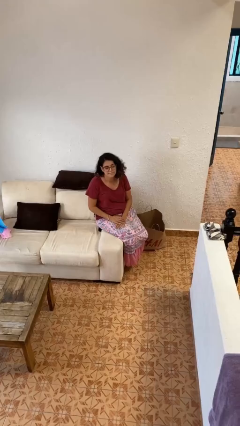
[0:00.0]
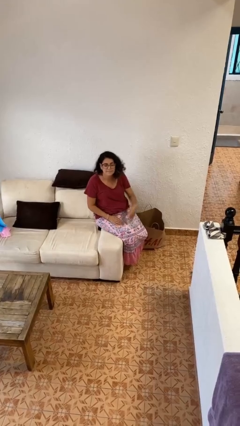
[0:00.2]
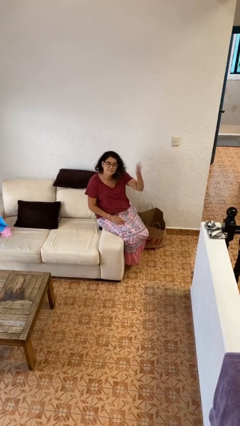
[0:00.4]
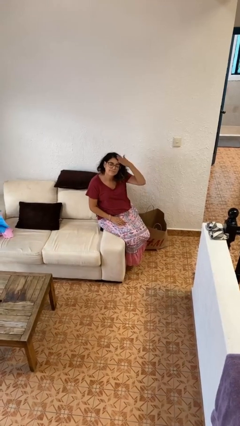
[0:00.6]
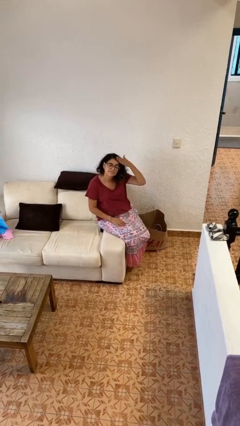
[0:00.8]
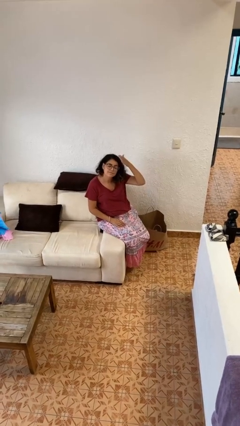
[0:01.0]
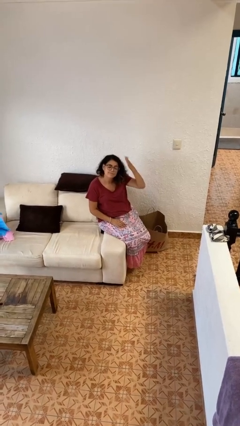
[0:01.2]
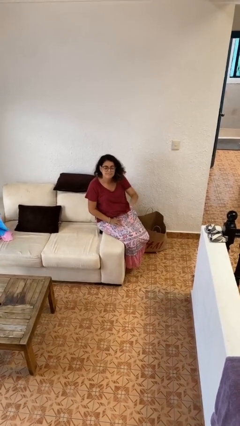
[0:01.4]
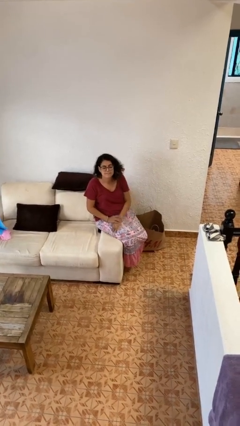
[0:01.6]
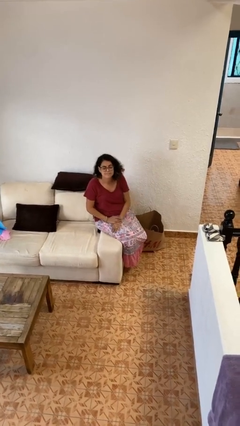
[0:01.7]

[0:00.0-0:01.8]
person pats head

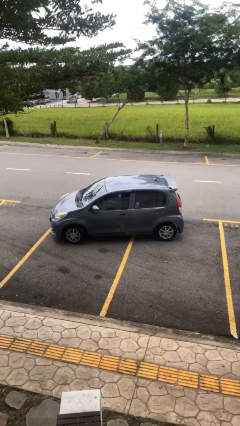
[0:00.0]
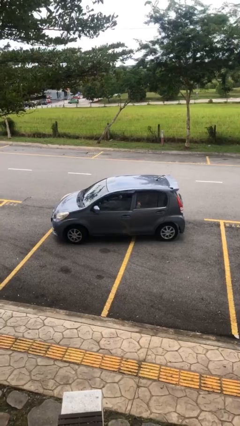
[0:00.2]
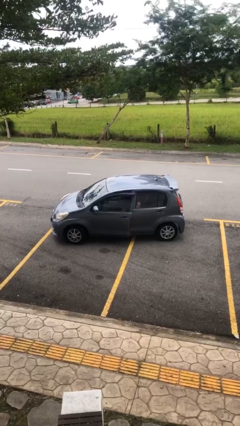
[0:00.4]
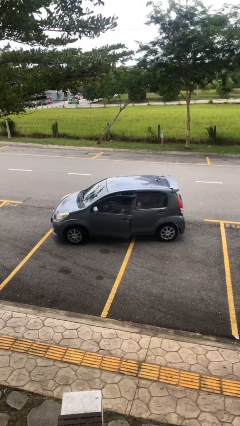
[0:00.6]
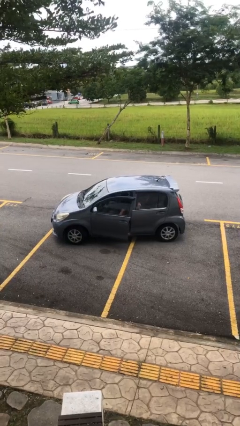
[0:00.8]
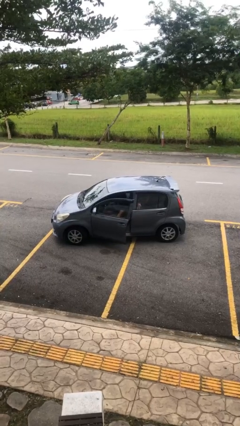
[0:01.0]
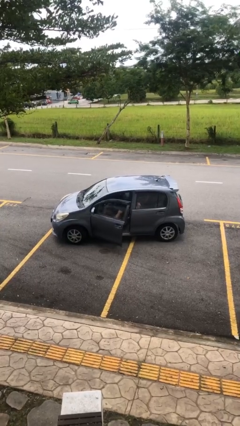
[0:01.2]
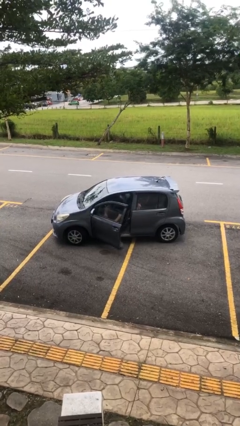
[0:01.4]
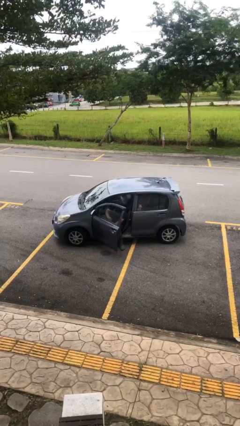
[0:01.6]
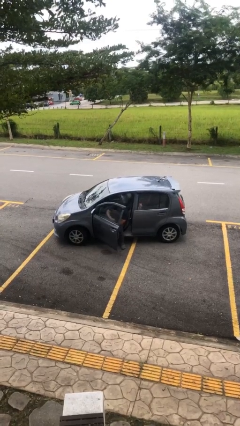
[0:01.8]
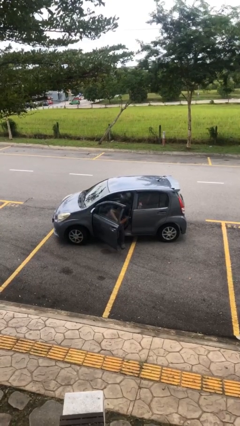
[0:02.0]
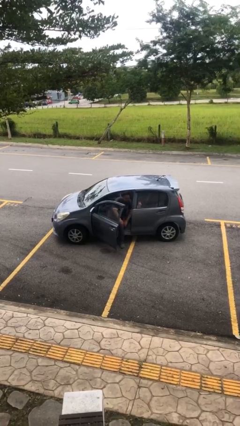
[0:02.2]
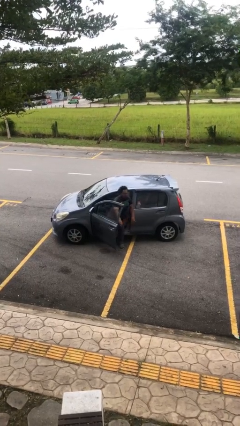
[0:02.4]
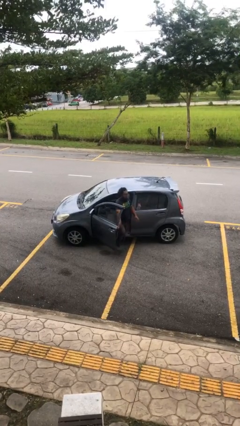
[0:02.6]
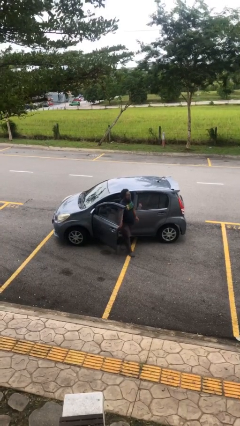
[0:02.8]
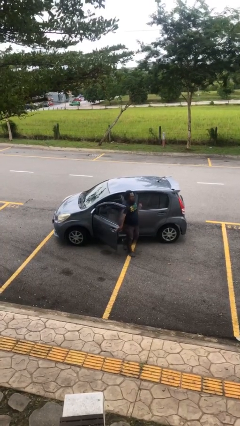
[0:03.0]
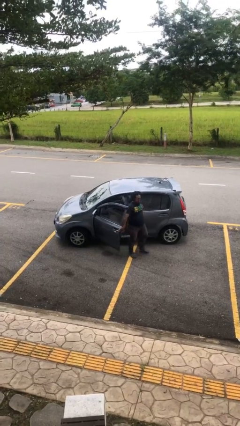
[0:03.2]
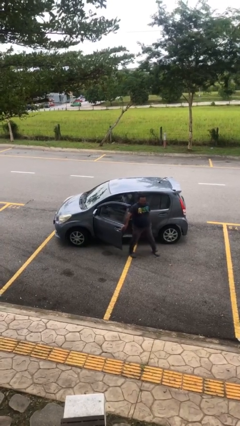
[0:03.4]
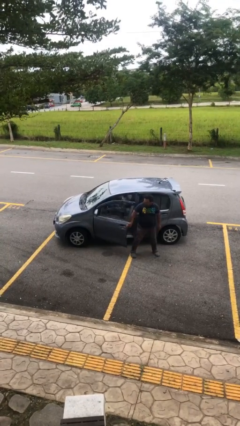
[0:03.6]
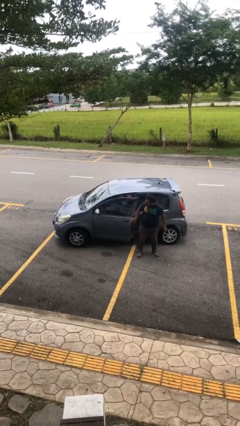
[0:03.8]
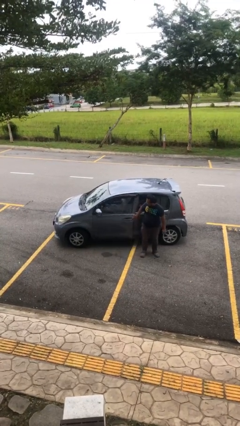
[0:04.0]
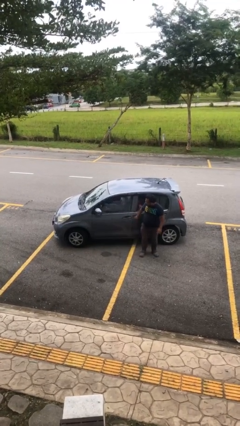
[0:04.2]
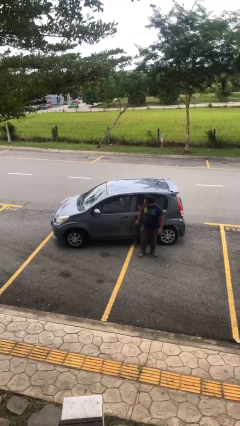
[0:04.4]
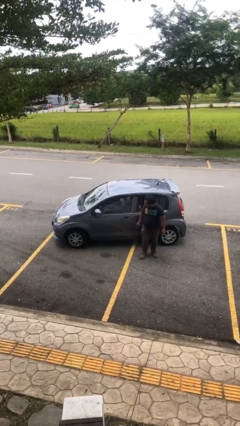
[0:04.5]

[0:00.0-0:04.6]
car drops off person

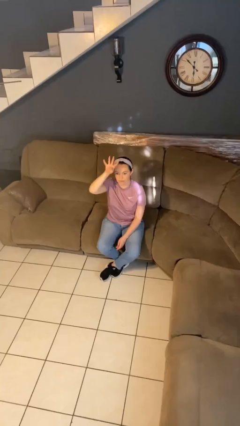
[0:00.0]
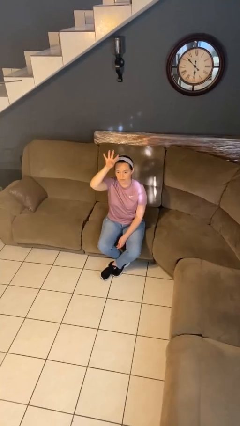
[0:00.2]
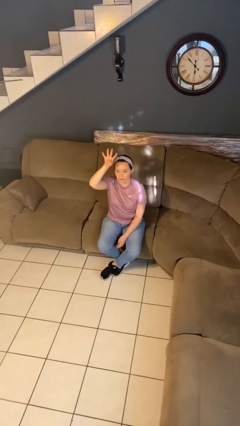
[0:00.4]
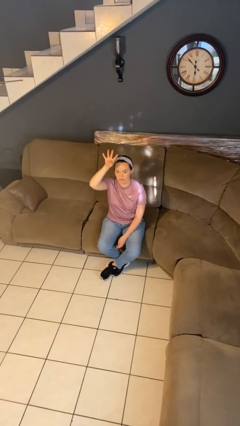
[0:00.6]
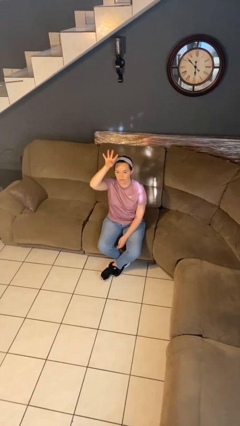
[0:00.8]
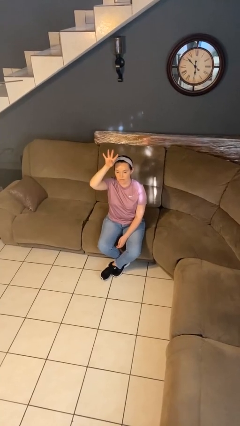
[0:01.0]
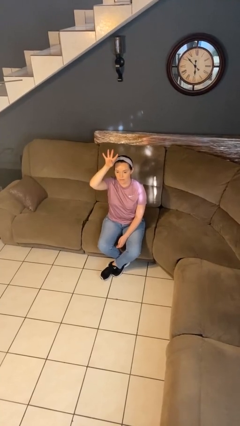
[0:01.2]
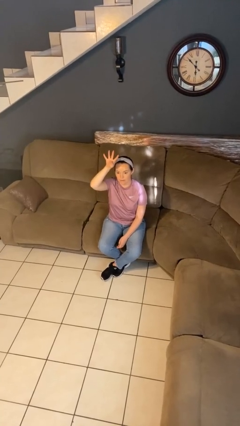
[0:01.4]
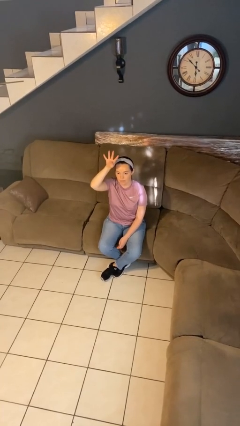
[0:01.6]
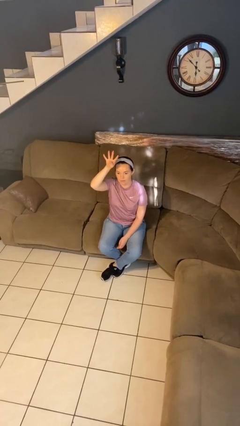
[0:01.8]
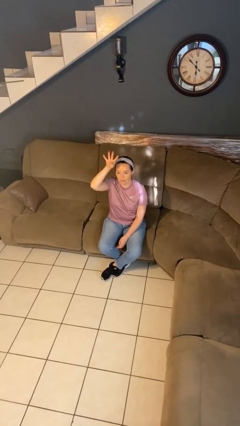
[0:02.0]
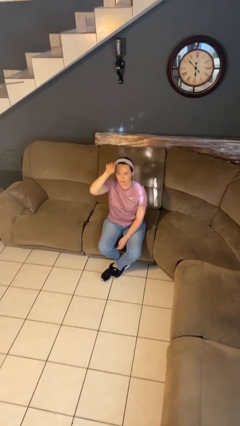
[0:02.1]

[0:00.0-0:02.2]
person gestures number four

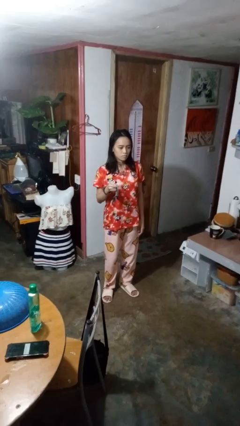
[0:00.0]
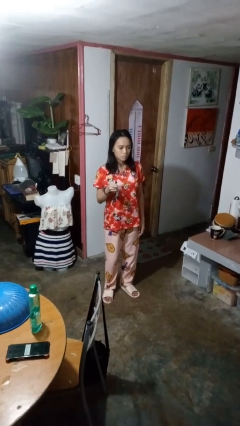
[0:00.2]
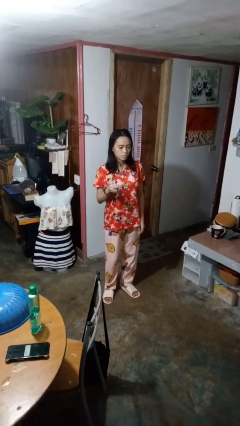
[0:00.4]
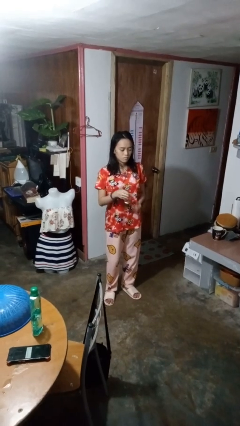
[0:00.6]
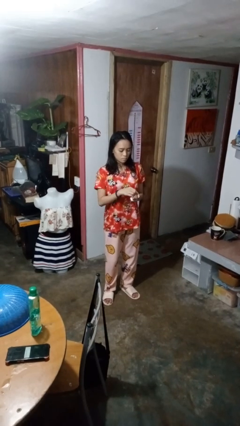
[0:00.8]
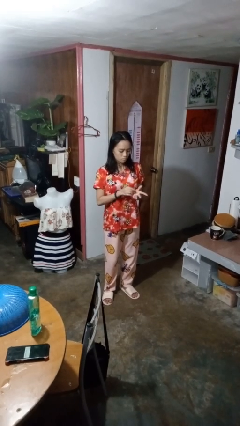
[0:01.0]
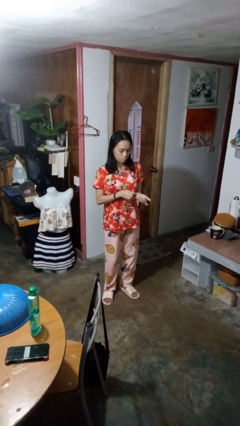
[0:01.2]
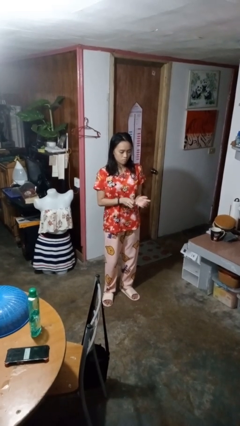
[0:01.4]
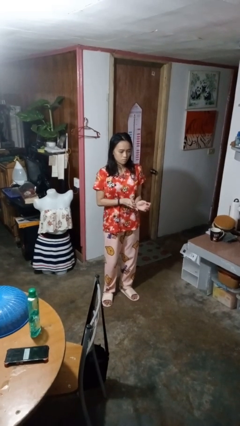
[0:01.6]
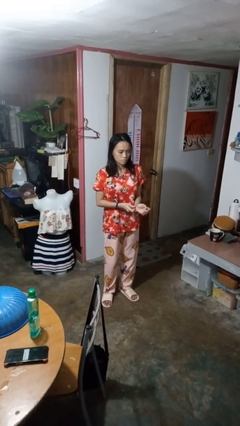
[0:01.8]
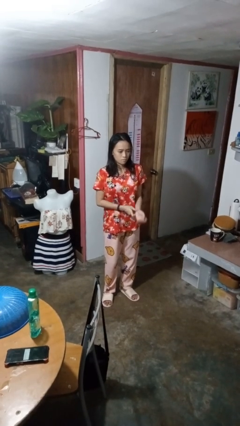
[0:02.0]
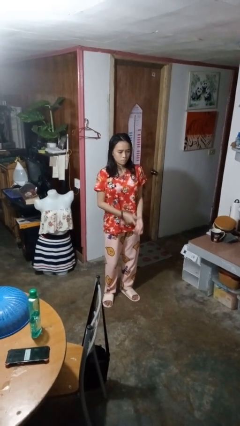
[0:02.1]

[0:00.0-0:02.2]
person puts on wristwatch

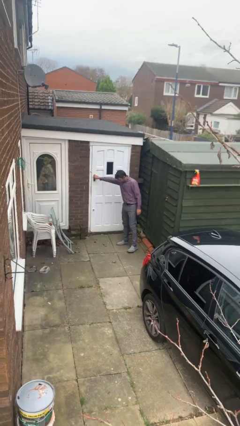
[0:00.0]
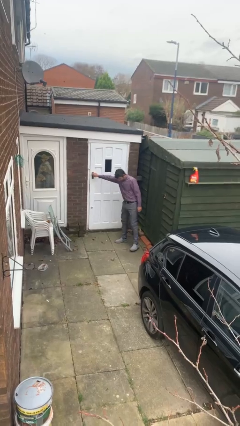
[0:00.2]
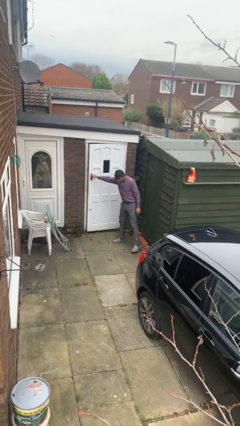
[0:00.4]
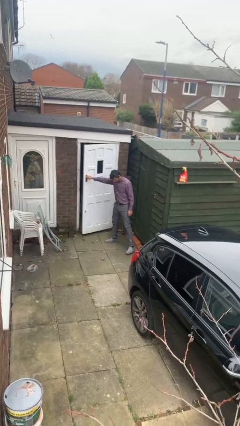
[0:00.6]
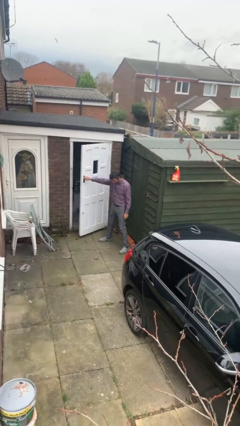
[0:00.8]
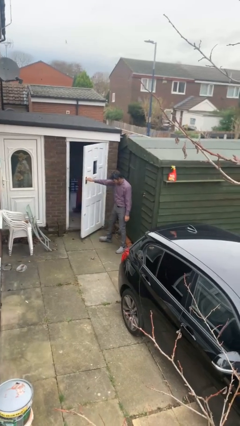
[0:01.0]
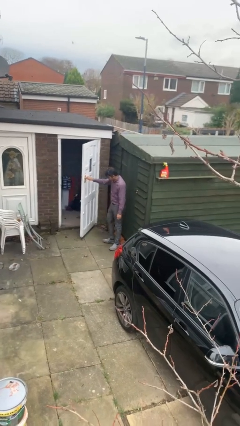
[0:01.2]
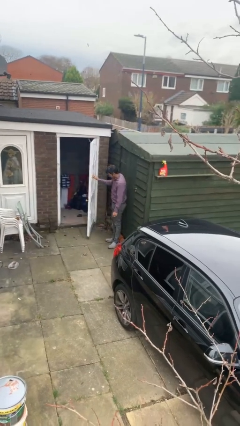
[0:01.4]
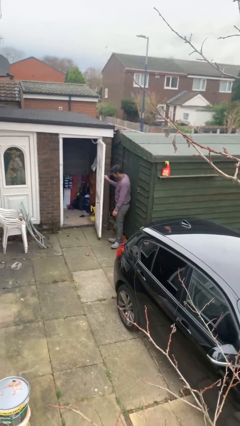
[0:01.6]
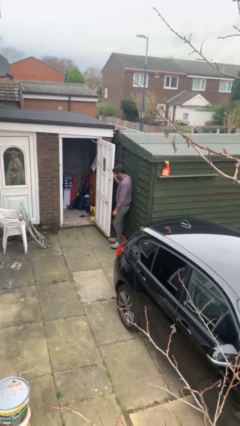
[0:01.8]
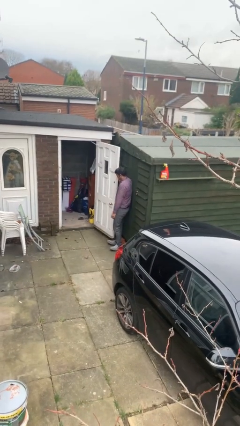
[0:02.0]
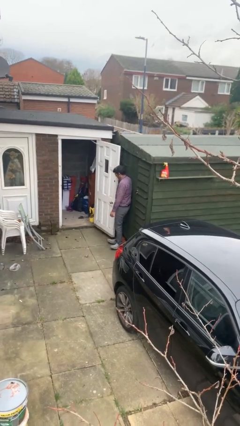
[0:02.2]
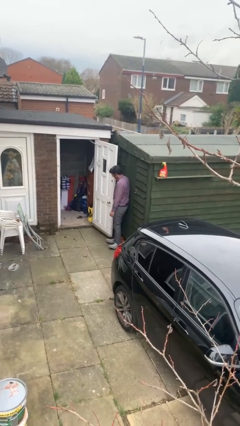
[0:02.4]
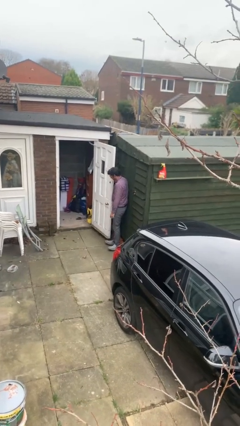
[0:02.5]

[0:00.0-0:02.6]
person opens facility door

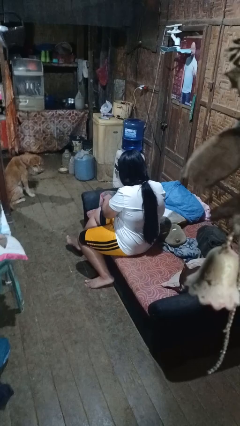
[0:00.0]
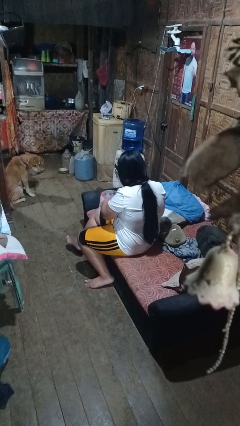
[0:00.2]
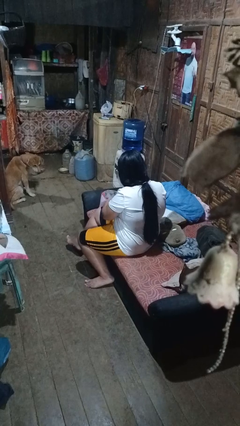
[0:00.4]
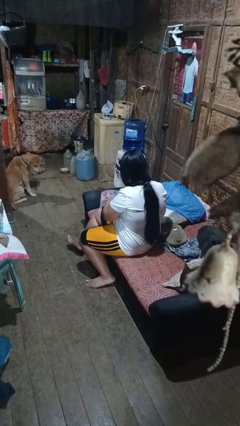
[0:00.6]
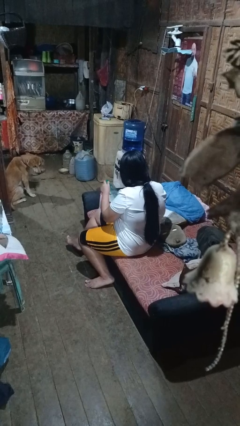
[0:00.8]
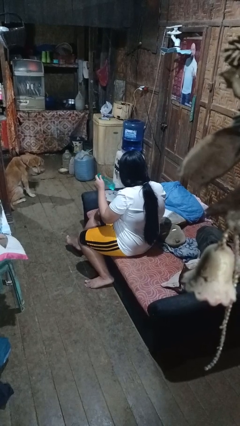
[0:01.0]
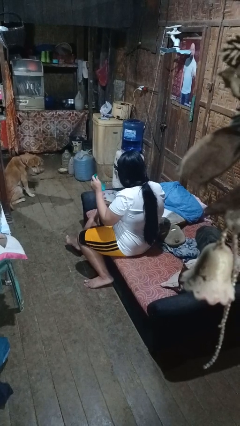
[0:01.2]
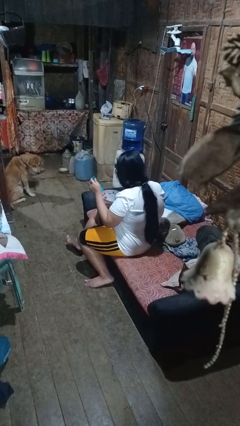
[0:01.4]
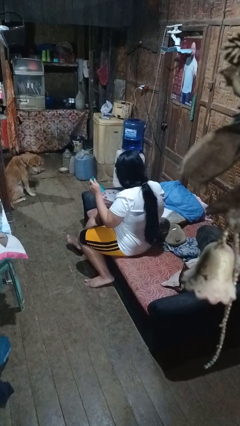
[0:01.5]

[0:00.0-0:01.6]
person searches in bag

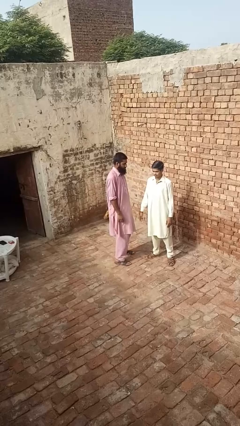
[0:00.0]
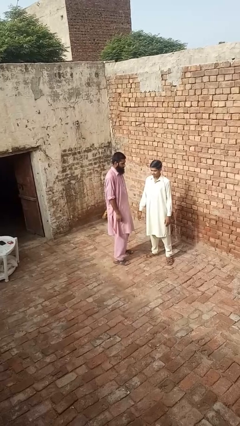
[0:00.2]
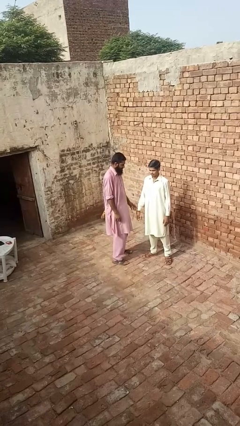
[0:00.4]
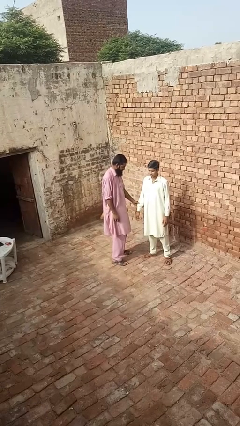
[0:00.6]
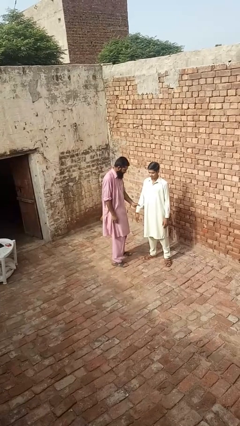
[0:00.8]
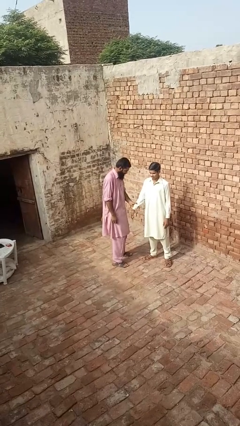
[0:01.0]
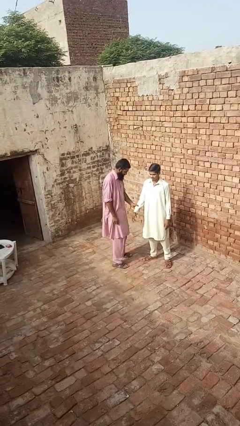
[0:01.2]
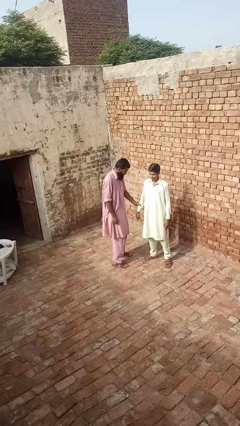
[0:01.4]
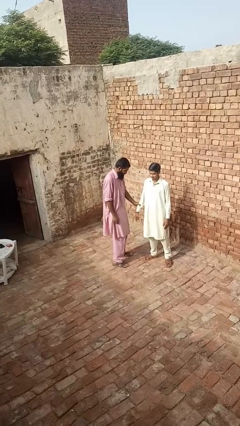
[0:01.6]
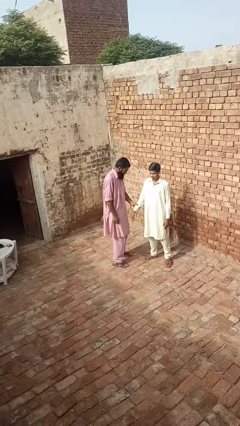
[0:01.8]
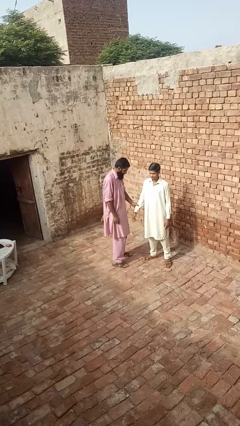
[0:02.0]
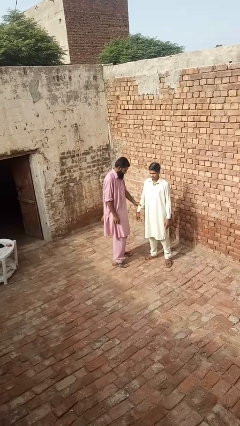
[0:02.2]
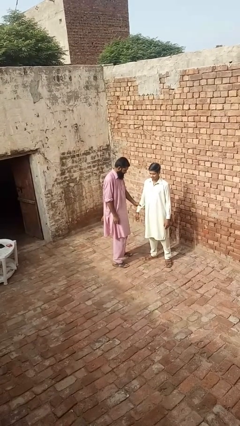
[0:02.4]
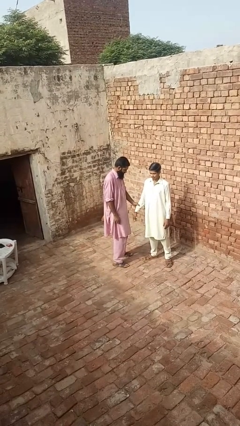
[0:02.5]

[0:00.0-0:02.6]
person grabs person by forearm
